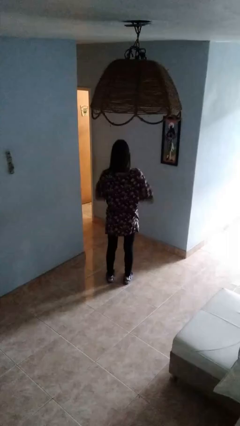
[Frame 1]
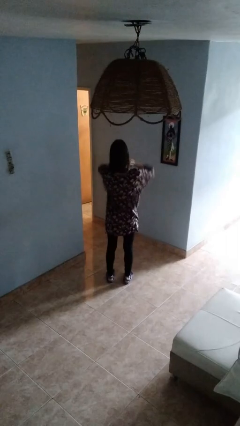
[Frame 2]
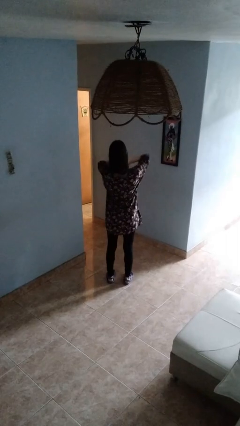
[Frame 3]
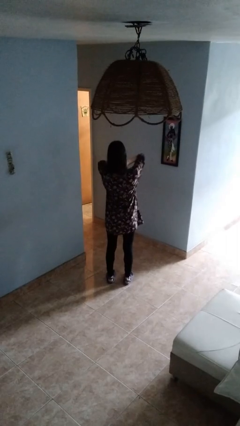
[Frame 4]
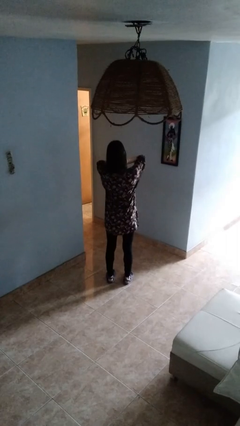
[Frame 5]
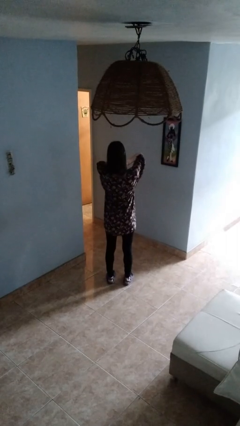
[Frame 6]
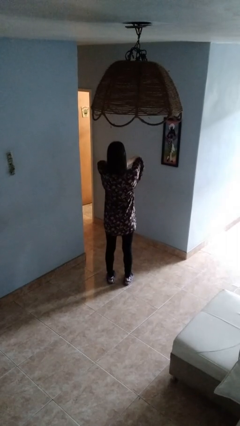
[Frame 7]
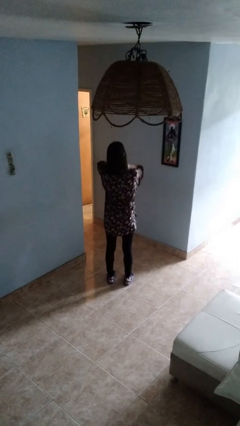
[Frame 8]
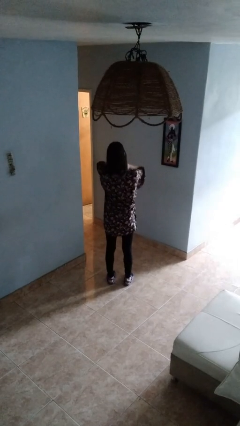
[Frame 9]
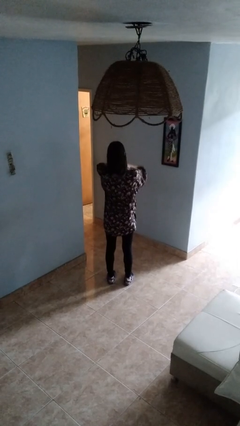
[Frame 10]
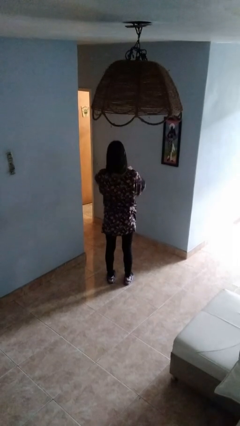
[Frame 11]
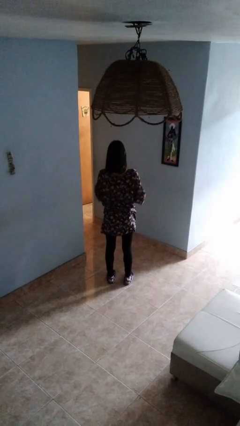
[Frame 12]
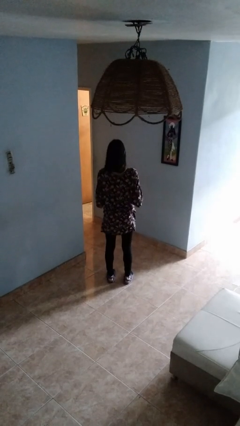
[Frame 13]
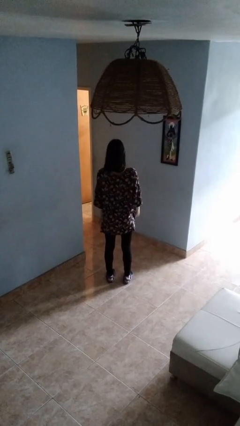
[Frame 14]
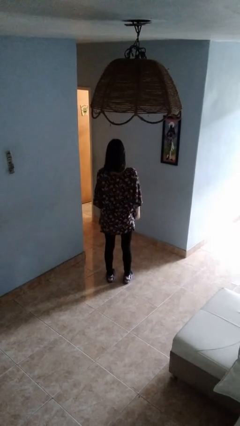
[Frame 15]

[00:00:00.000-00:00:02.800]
person rubs neck

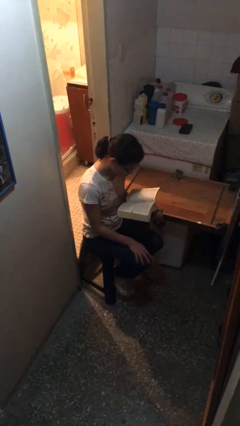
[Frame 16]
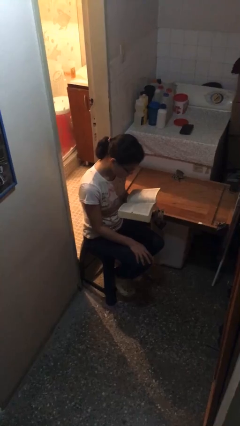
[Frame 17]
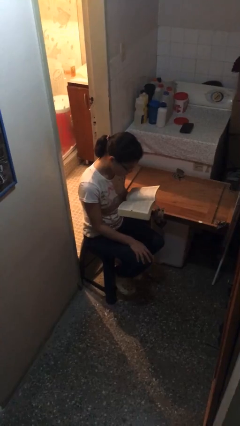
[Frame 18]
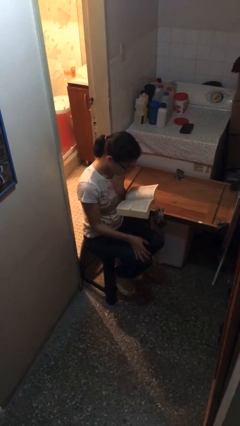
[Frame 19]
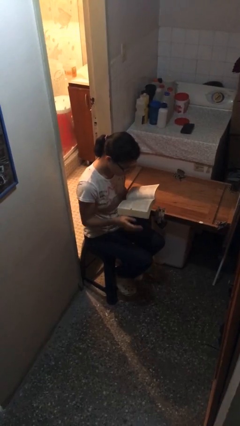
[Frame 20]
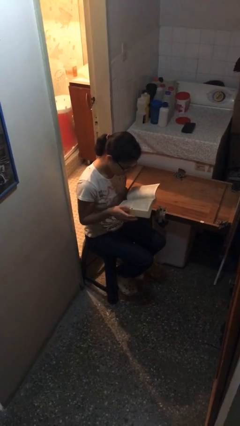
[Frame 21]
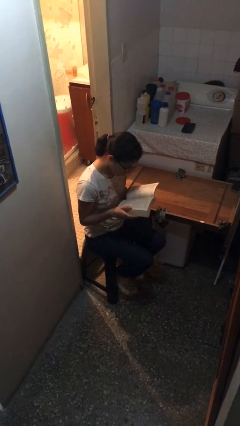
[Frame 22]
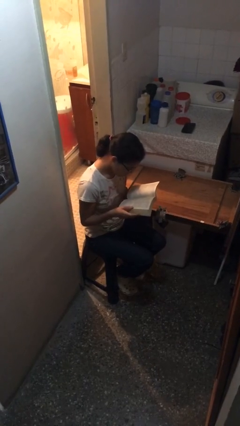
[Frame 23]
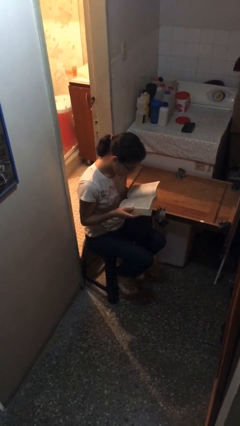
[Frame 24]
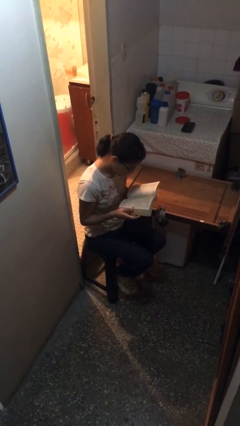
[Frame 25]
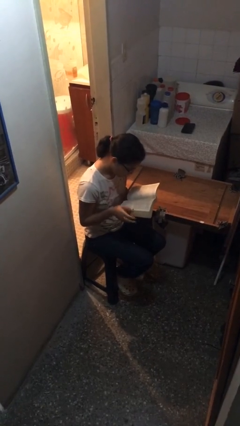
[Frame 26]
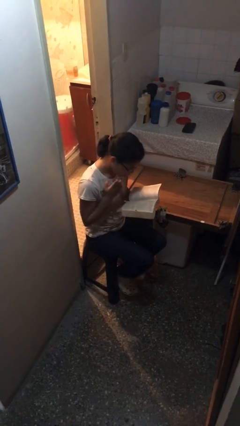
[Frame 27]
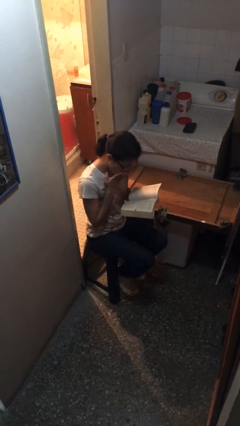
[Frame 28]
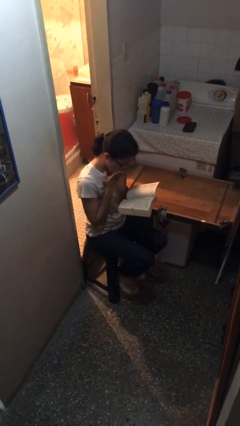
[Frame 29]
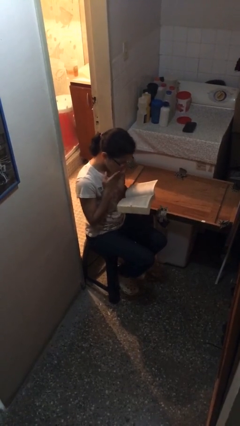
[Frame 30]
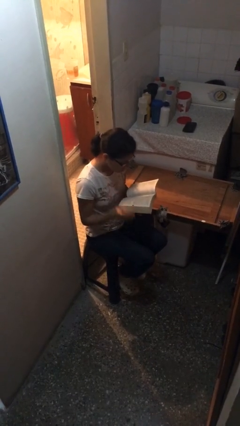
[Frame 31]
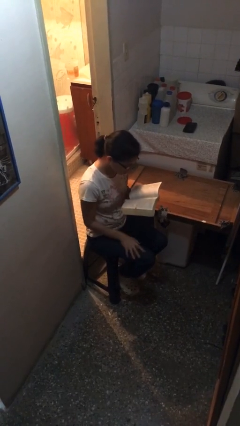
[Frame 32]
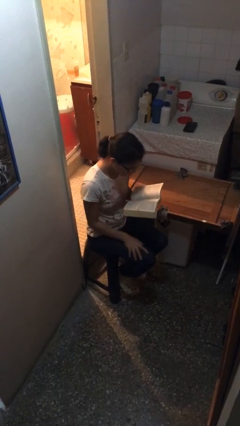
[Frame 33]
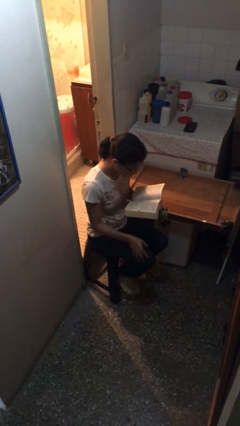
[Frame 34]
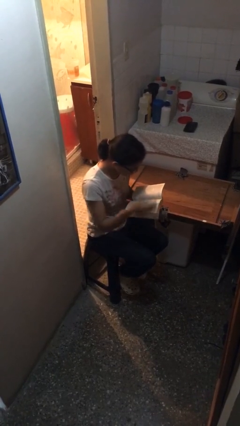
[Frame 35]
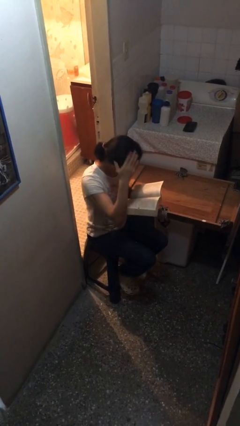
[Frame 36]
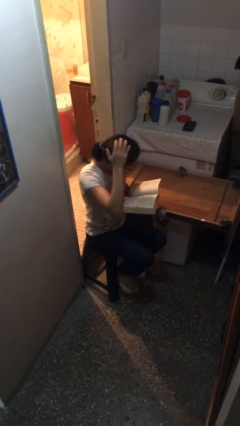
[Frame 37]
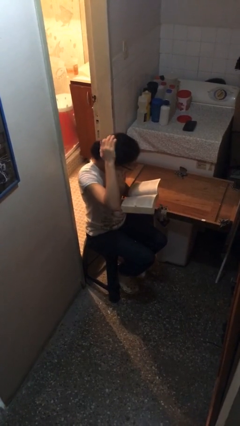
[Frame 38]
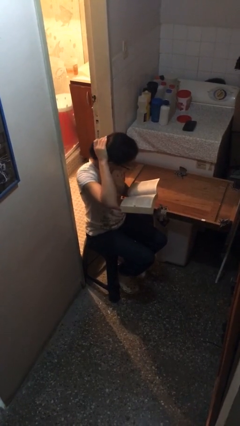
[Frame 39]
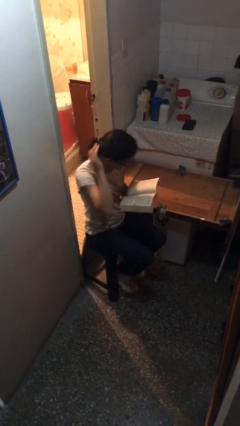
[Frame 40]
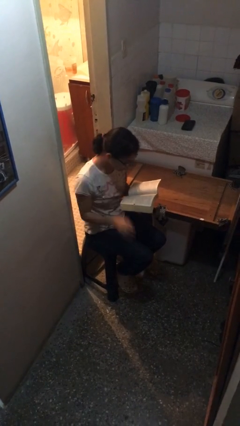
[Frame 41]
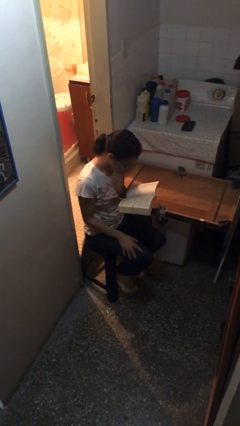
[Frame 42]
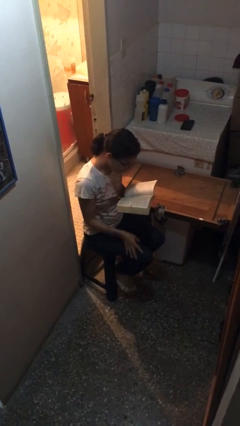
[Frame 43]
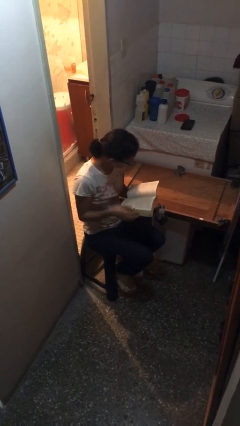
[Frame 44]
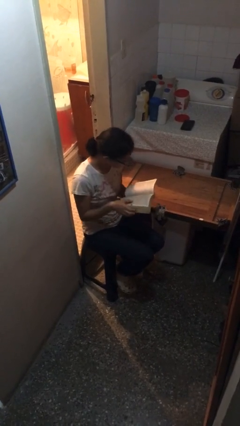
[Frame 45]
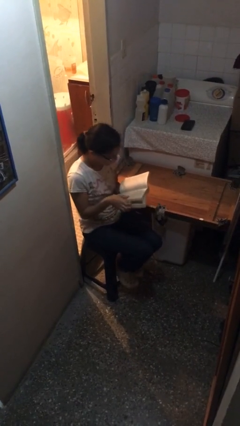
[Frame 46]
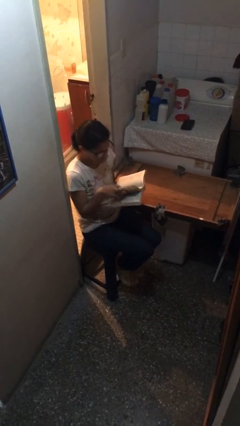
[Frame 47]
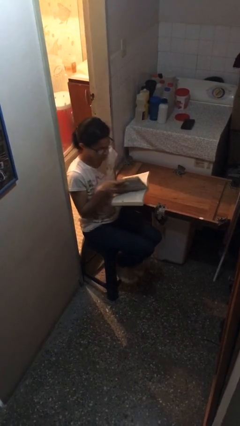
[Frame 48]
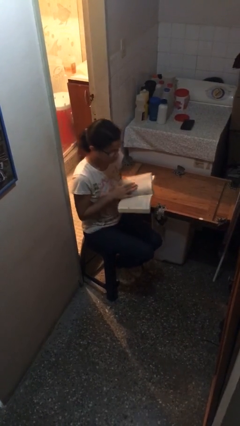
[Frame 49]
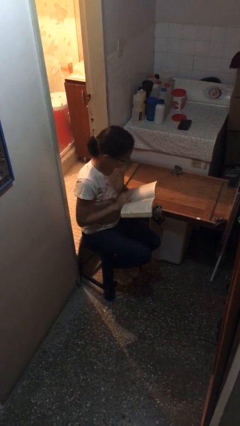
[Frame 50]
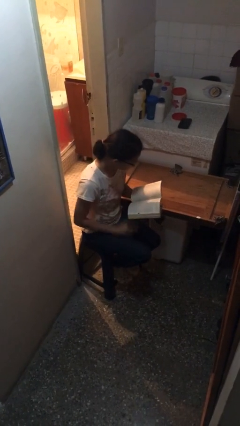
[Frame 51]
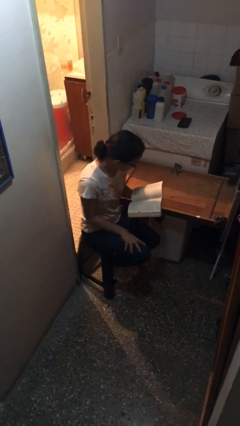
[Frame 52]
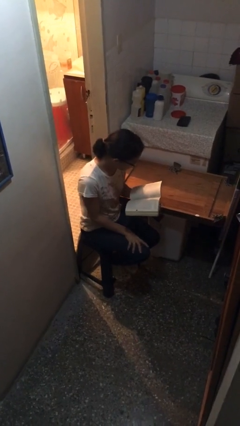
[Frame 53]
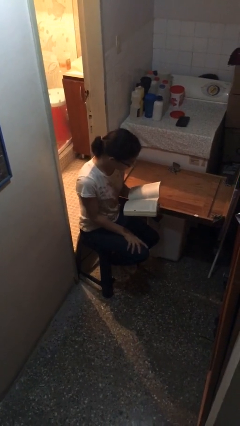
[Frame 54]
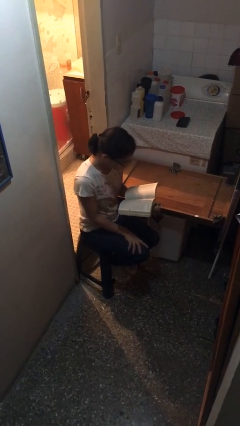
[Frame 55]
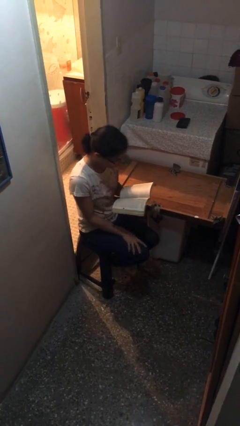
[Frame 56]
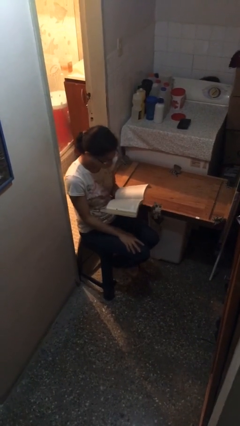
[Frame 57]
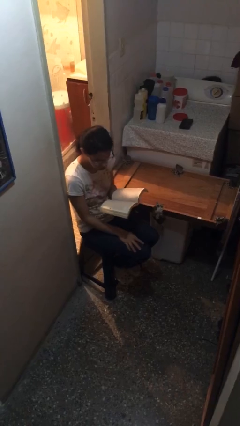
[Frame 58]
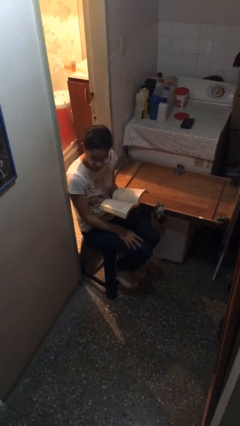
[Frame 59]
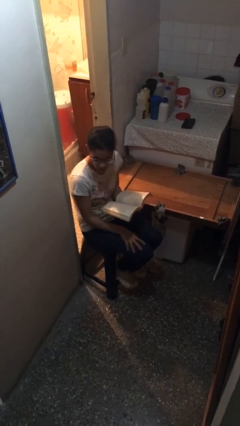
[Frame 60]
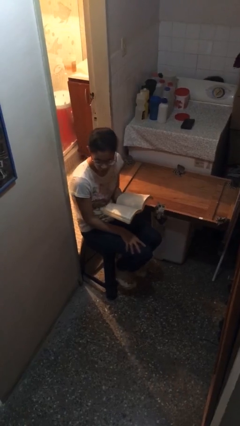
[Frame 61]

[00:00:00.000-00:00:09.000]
person reads document

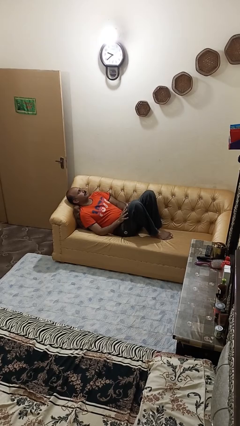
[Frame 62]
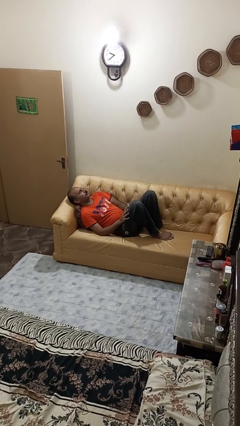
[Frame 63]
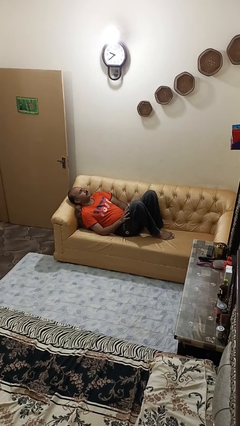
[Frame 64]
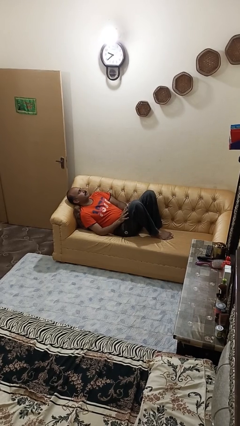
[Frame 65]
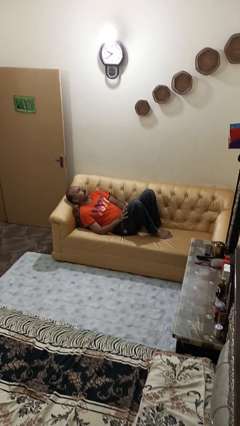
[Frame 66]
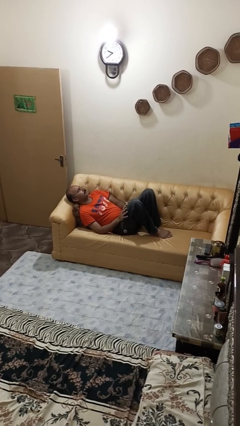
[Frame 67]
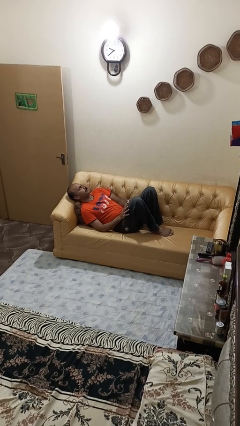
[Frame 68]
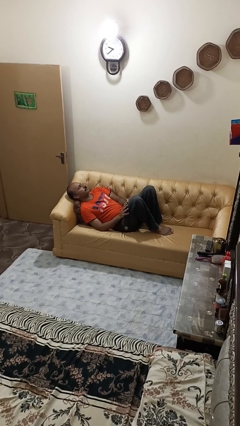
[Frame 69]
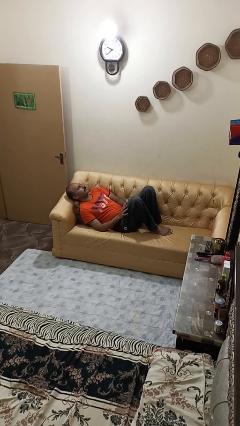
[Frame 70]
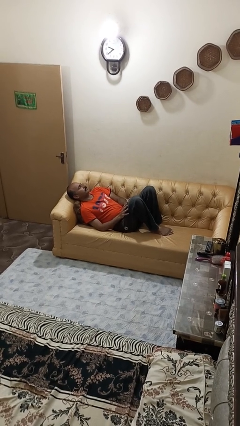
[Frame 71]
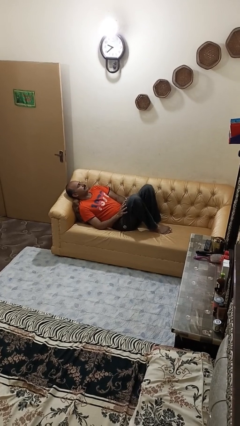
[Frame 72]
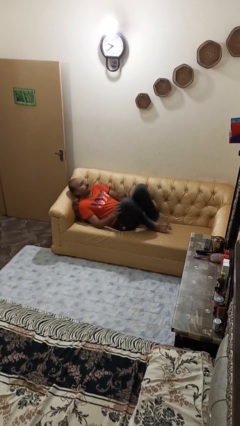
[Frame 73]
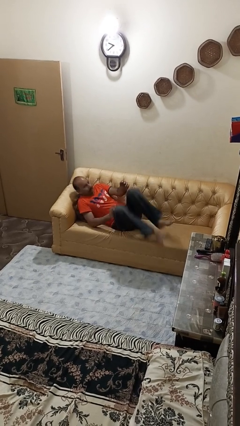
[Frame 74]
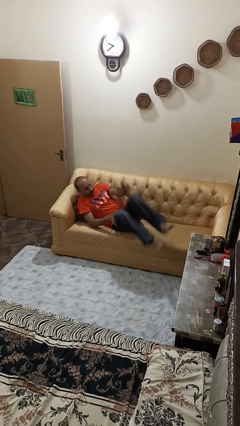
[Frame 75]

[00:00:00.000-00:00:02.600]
person lies down on couch

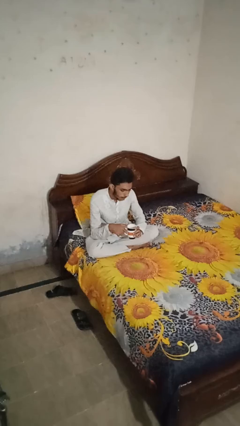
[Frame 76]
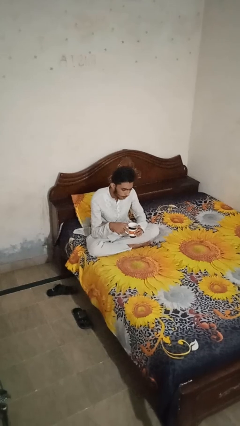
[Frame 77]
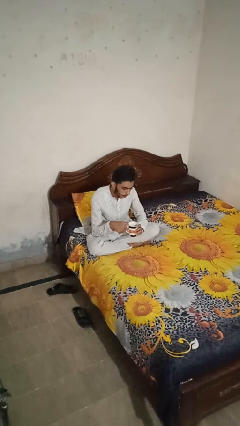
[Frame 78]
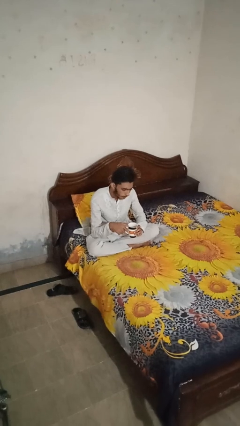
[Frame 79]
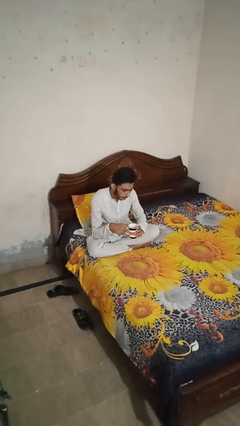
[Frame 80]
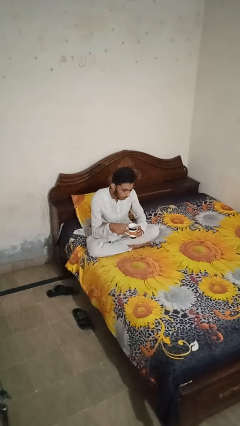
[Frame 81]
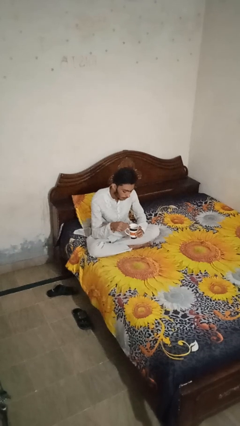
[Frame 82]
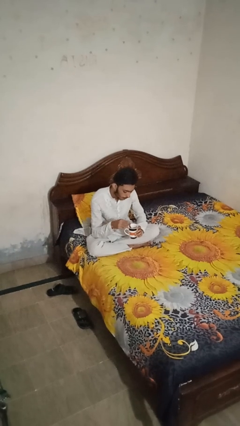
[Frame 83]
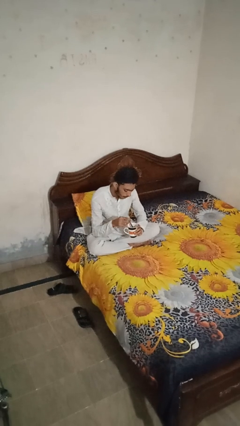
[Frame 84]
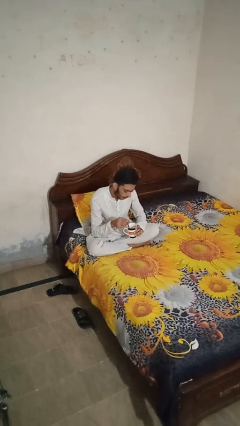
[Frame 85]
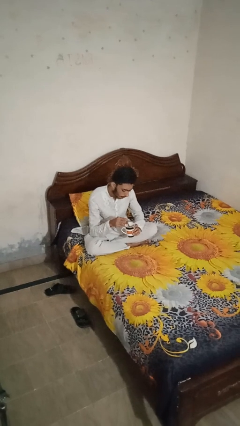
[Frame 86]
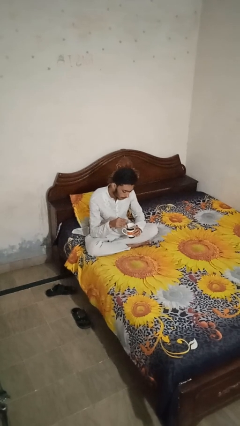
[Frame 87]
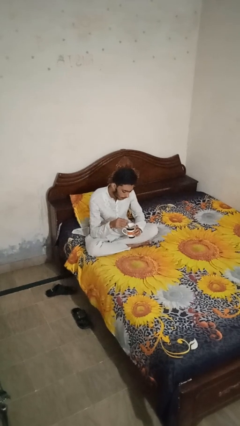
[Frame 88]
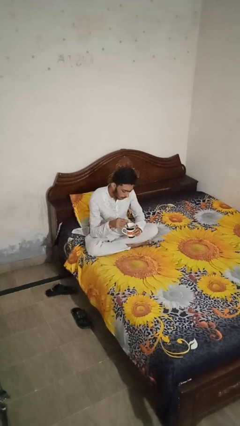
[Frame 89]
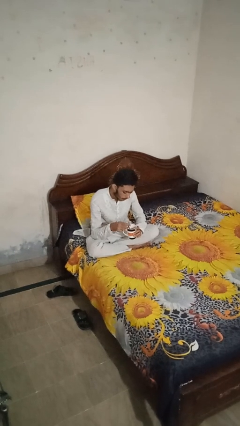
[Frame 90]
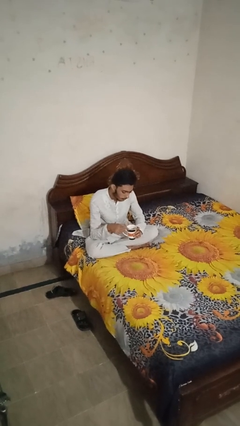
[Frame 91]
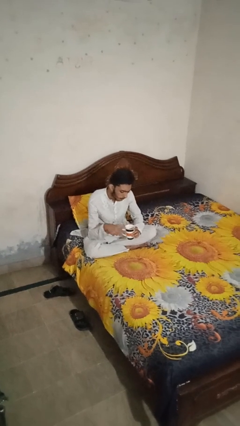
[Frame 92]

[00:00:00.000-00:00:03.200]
person stirs mug

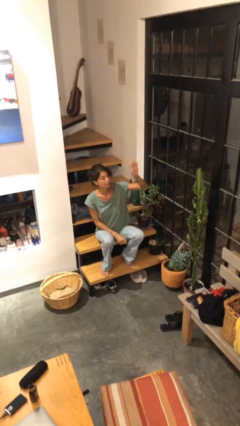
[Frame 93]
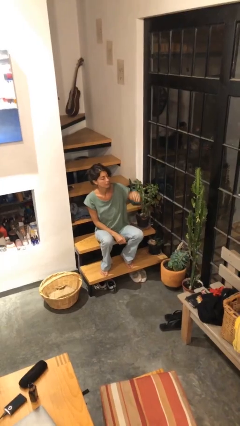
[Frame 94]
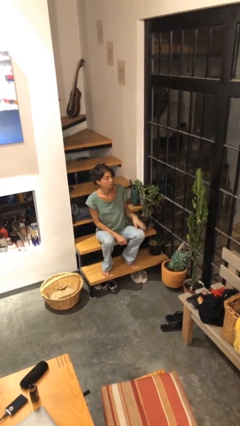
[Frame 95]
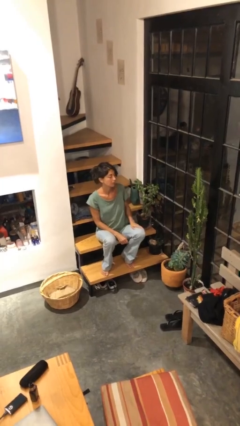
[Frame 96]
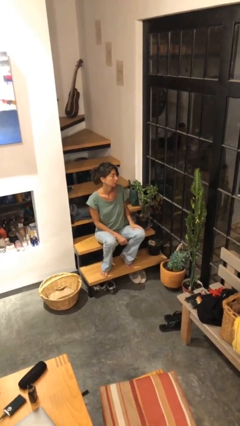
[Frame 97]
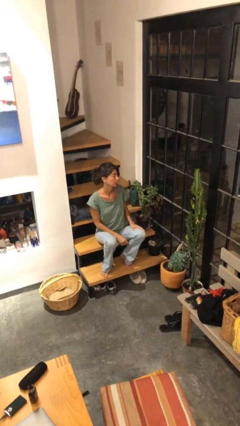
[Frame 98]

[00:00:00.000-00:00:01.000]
person gestures lower hand
